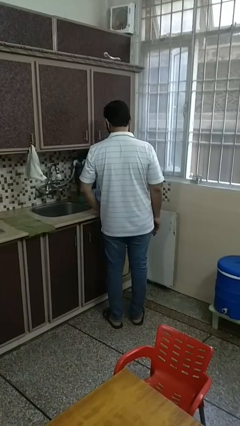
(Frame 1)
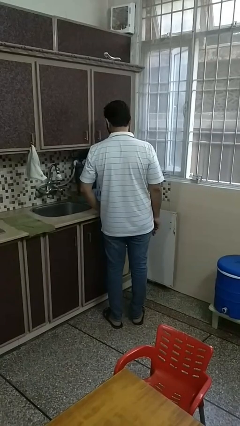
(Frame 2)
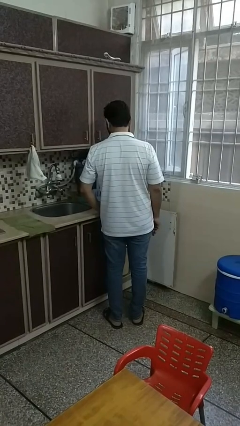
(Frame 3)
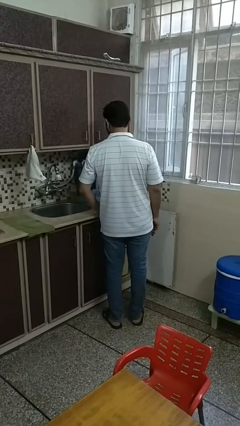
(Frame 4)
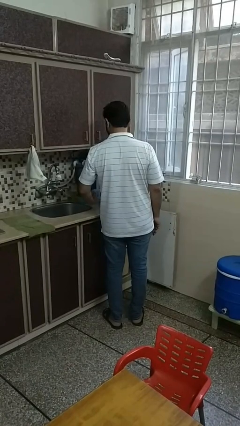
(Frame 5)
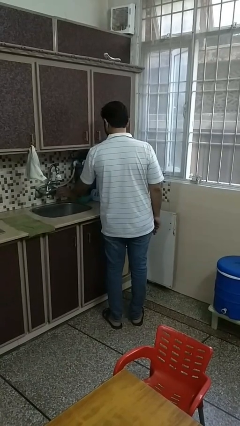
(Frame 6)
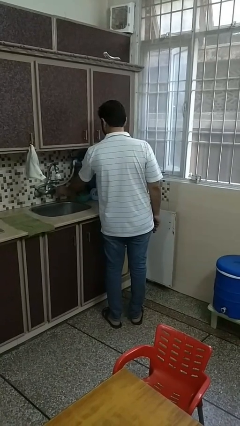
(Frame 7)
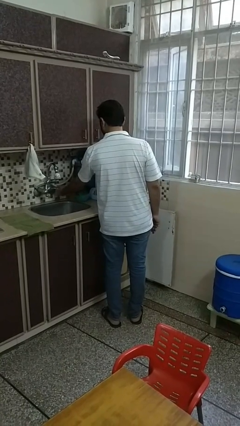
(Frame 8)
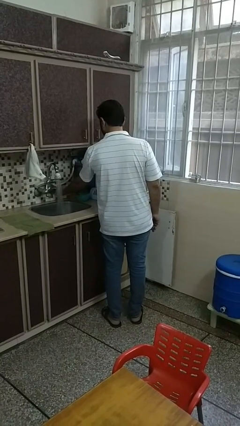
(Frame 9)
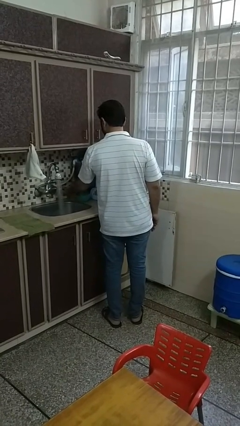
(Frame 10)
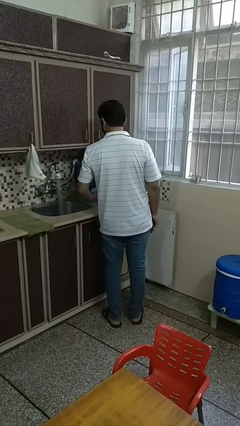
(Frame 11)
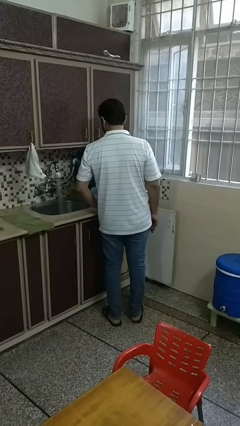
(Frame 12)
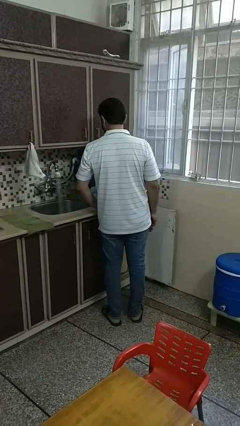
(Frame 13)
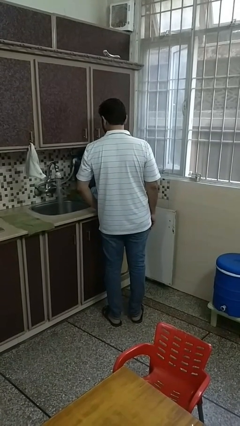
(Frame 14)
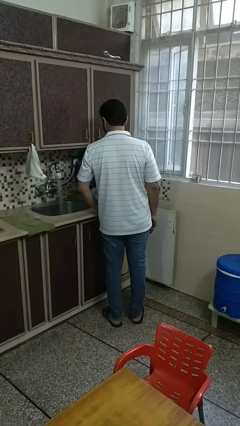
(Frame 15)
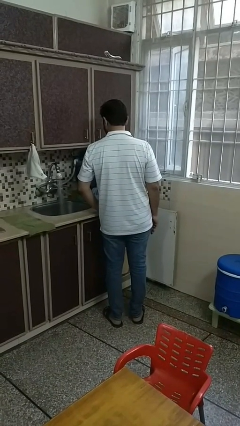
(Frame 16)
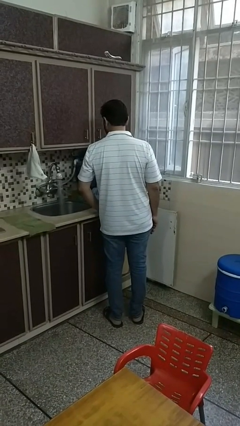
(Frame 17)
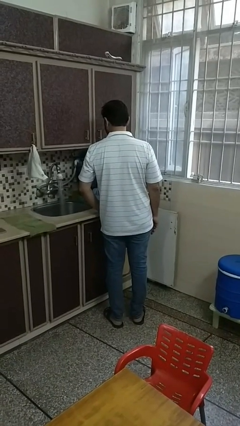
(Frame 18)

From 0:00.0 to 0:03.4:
person turns on faucet

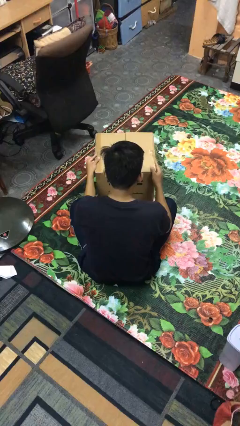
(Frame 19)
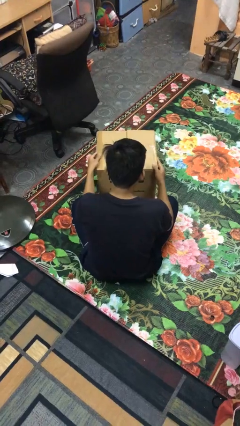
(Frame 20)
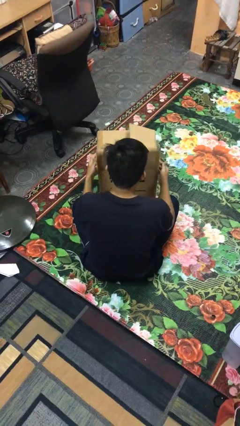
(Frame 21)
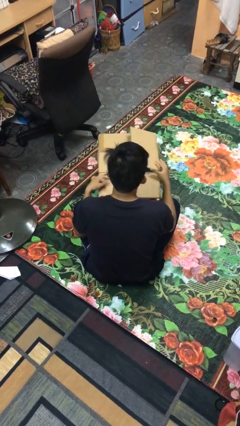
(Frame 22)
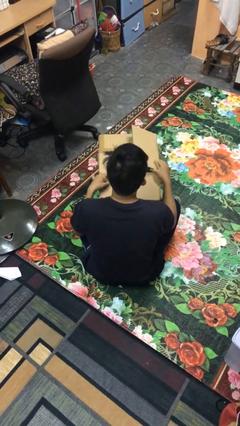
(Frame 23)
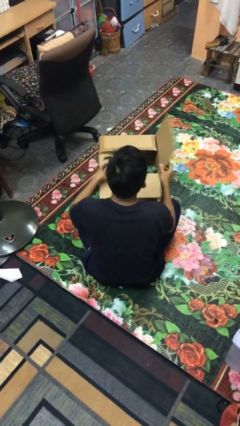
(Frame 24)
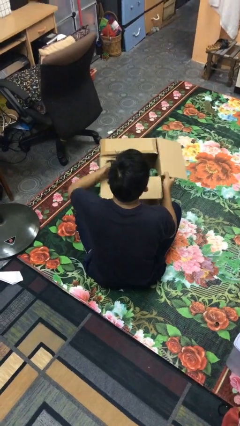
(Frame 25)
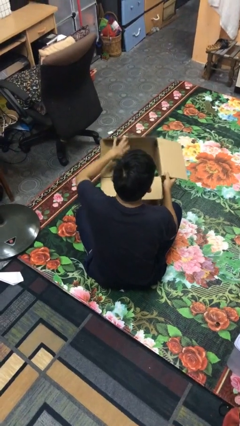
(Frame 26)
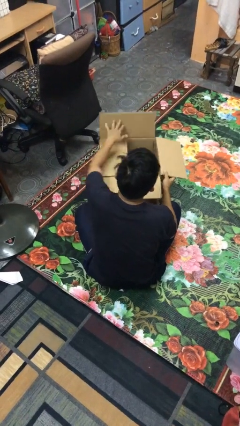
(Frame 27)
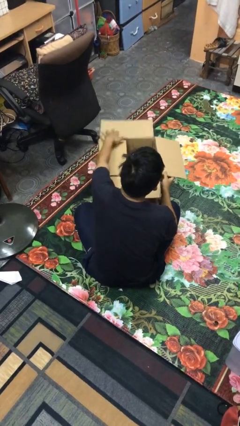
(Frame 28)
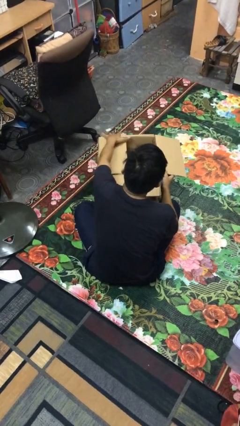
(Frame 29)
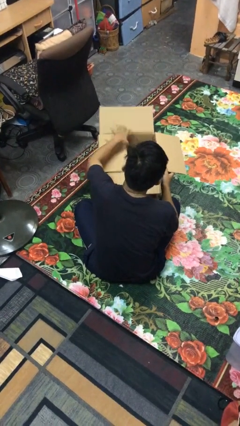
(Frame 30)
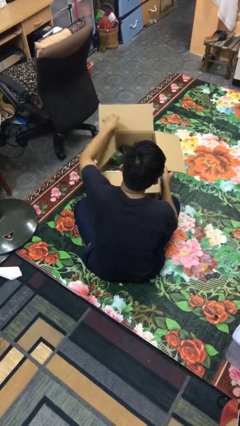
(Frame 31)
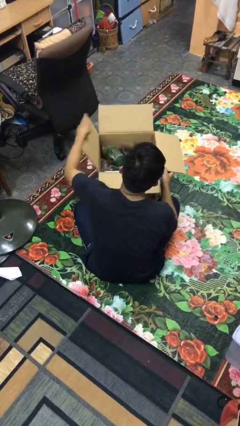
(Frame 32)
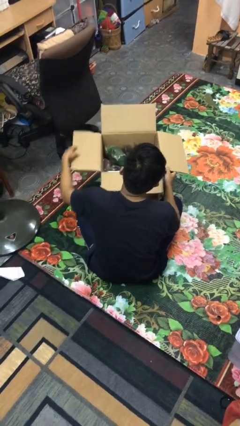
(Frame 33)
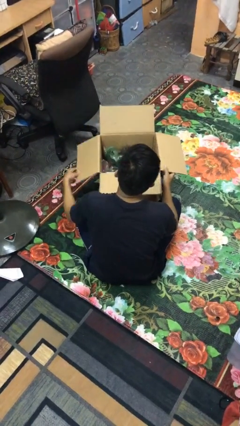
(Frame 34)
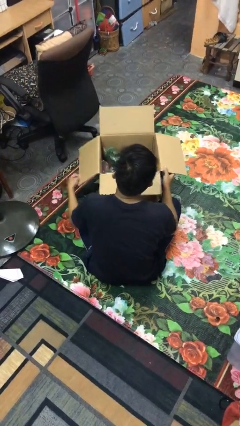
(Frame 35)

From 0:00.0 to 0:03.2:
person opens box

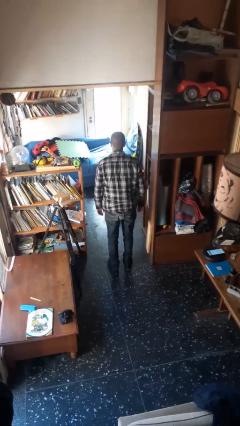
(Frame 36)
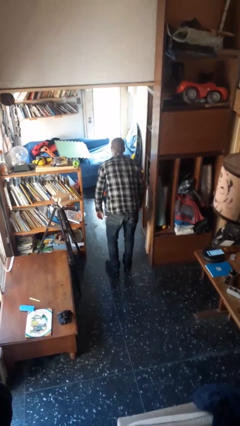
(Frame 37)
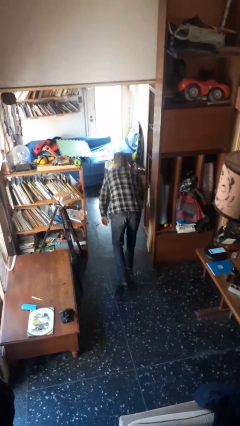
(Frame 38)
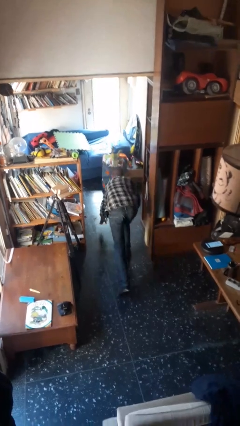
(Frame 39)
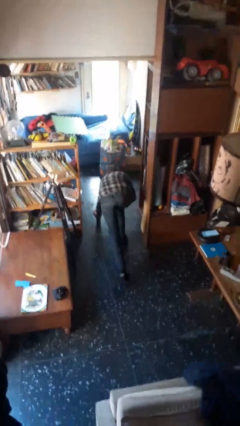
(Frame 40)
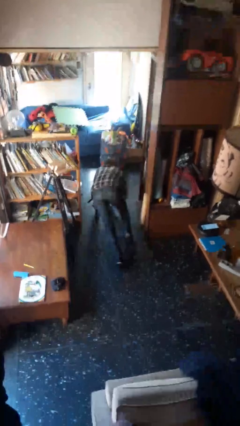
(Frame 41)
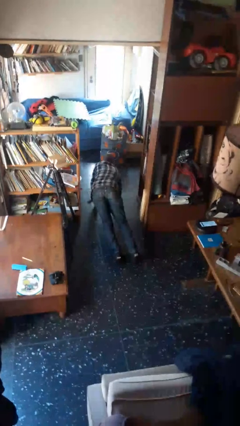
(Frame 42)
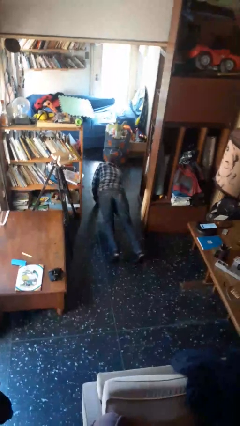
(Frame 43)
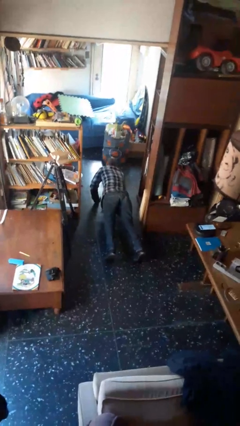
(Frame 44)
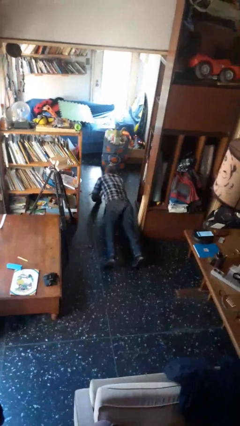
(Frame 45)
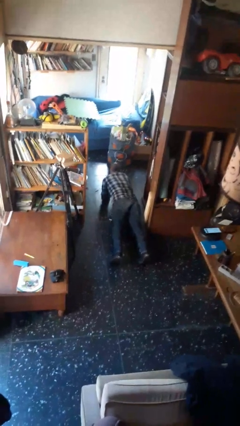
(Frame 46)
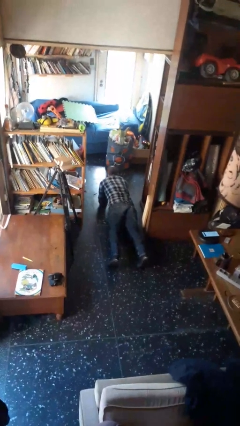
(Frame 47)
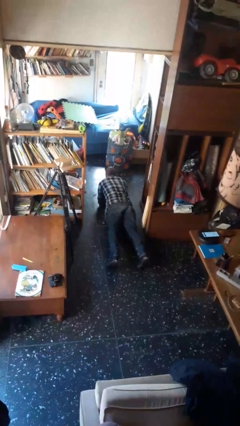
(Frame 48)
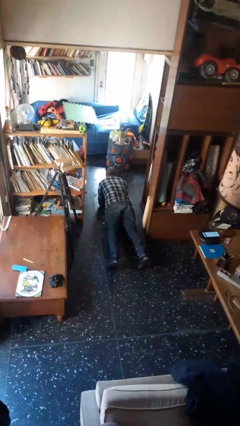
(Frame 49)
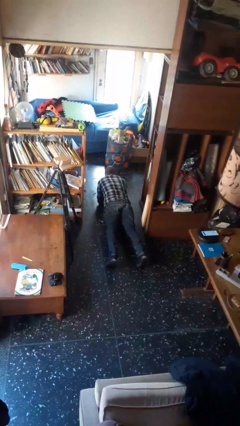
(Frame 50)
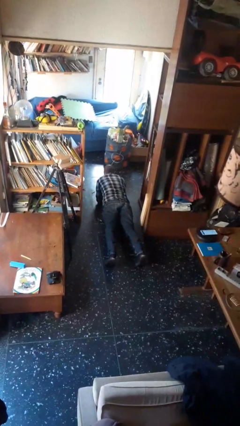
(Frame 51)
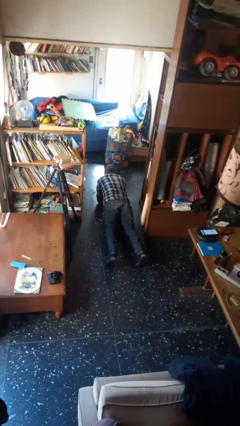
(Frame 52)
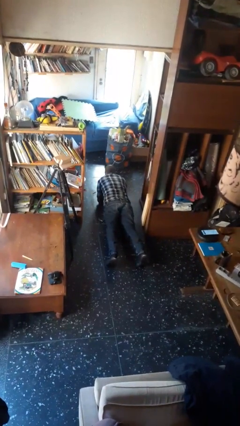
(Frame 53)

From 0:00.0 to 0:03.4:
person exercises with plank

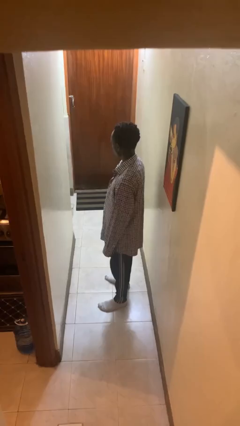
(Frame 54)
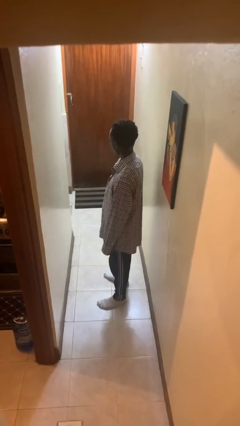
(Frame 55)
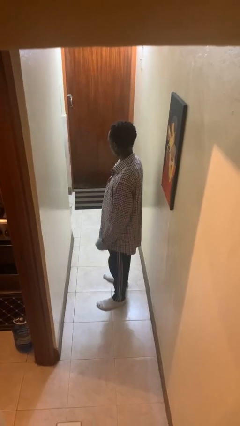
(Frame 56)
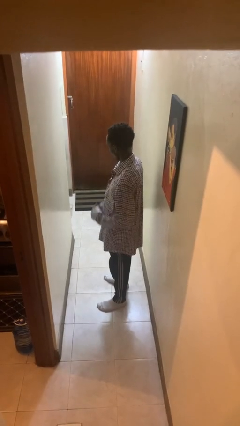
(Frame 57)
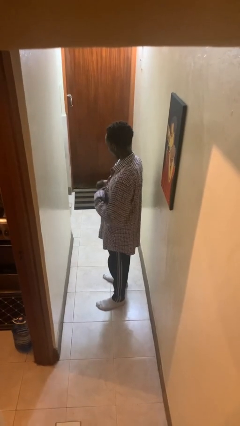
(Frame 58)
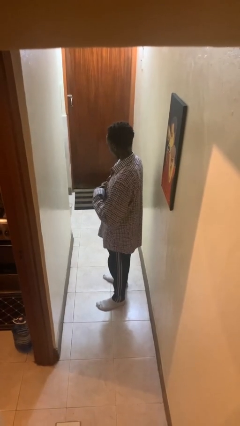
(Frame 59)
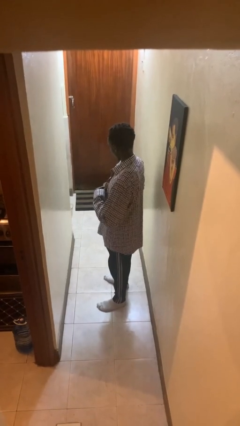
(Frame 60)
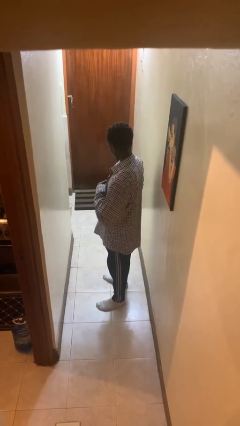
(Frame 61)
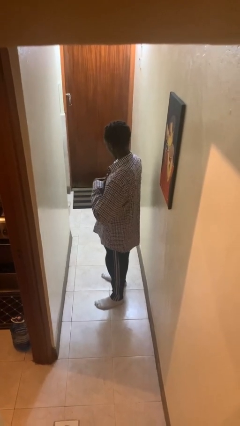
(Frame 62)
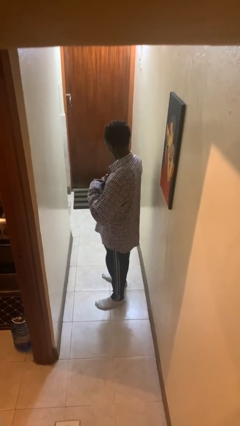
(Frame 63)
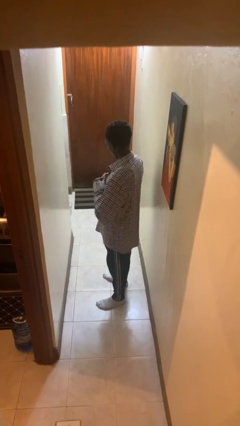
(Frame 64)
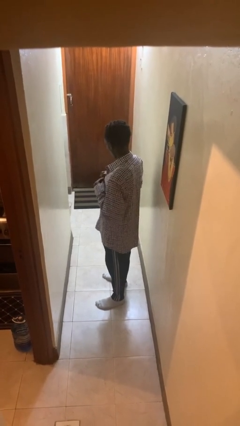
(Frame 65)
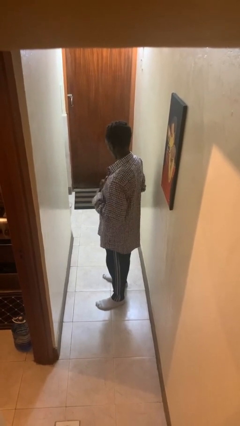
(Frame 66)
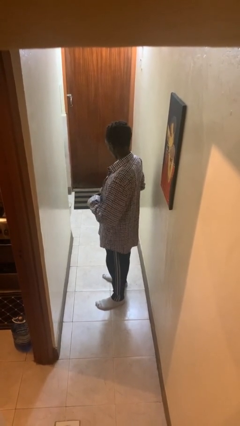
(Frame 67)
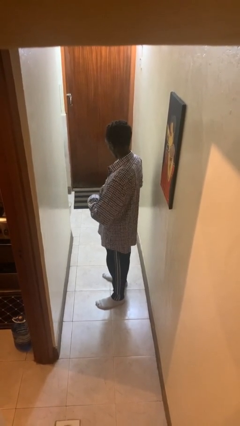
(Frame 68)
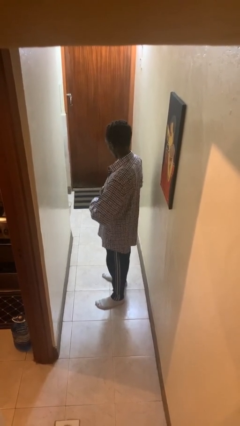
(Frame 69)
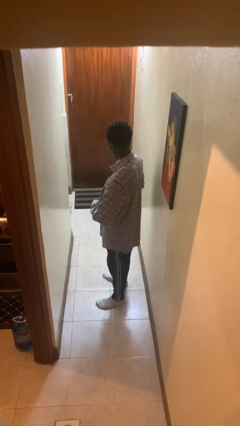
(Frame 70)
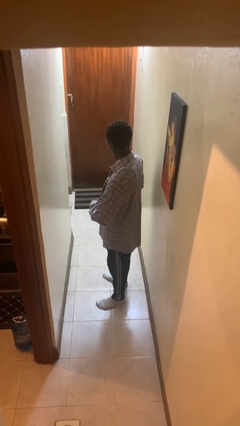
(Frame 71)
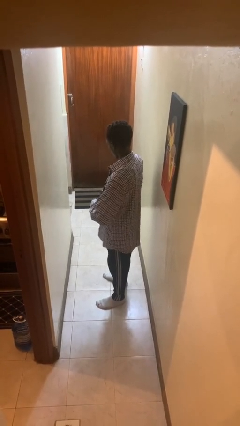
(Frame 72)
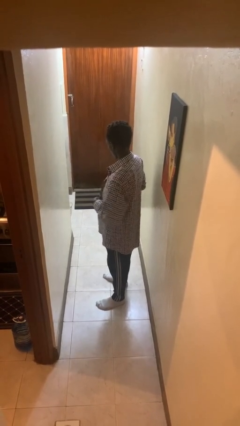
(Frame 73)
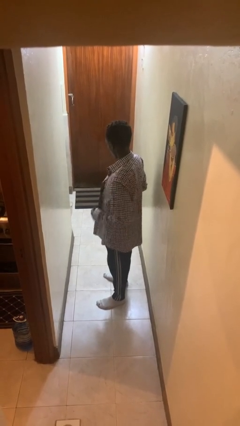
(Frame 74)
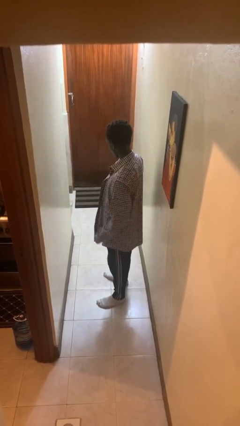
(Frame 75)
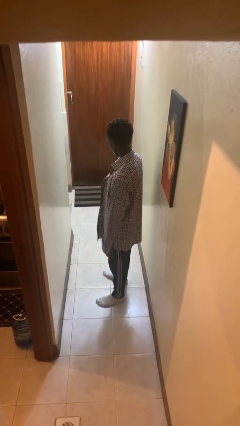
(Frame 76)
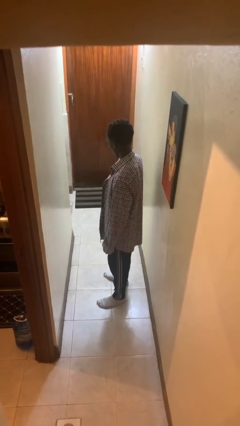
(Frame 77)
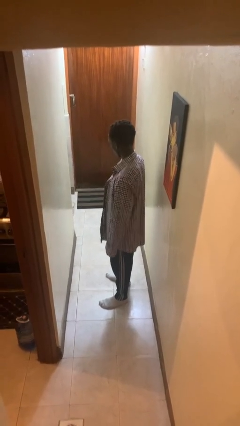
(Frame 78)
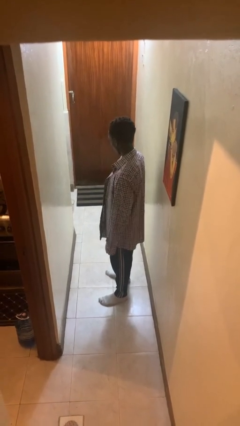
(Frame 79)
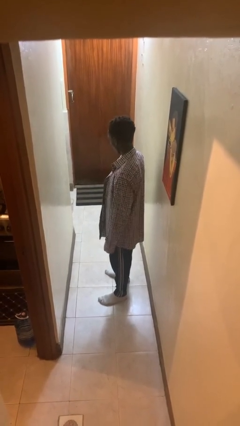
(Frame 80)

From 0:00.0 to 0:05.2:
person unbuttons shirt

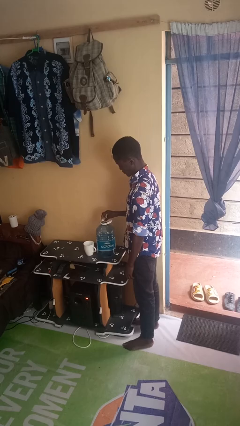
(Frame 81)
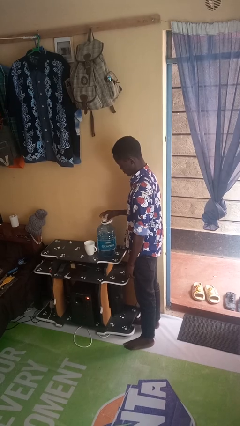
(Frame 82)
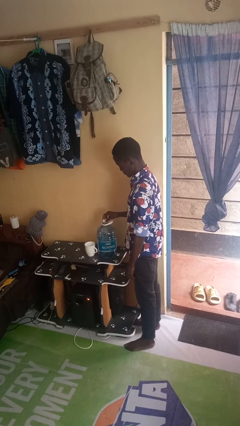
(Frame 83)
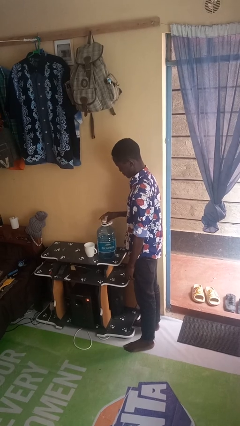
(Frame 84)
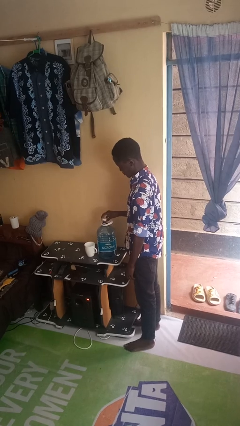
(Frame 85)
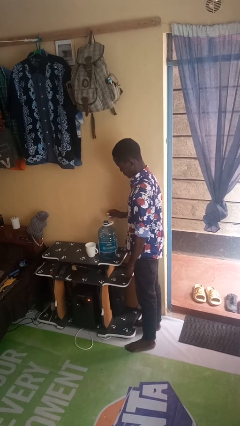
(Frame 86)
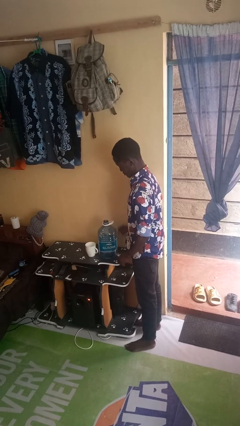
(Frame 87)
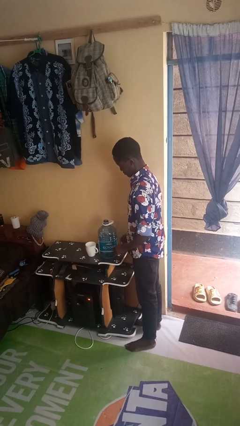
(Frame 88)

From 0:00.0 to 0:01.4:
person unscrews lid from bottle

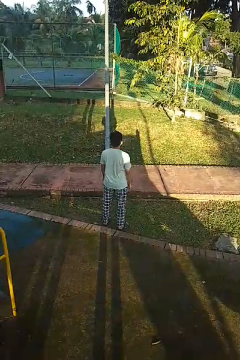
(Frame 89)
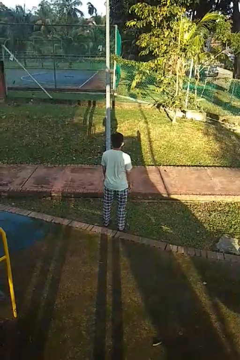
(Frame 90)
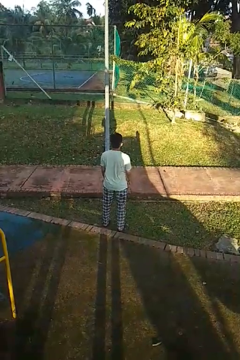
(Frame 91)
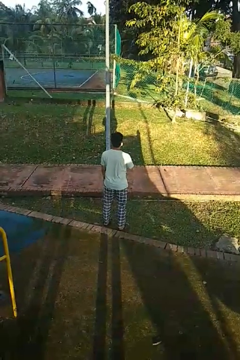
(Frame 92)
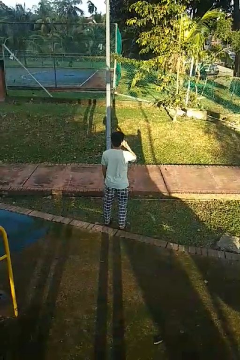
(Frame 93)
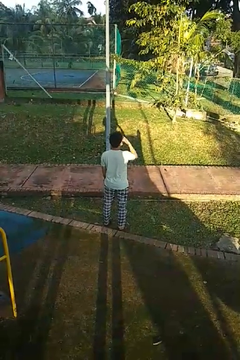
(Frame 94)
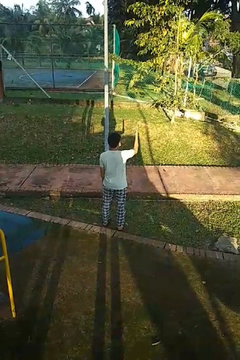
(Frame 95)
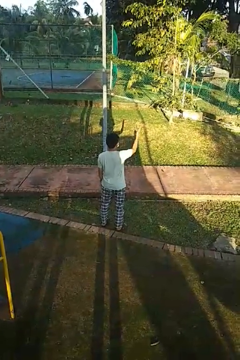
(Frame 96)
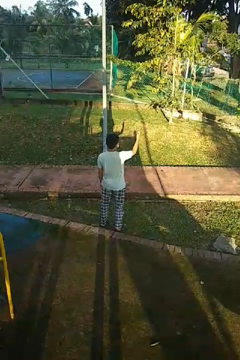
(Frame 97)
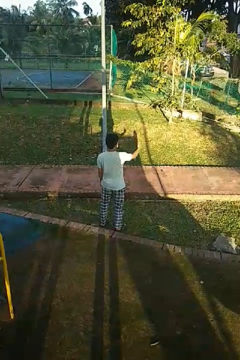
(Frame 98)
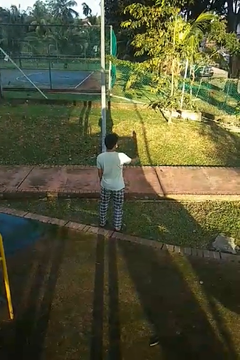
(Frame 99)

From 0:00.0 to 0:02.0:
person gestures blow kiss
